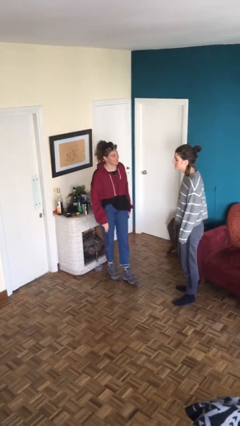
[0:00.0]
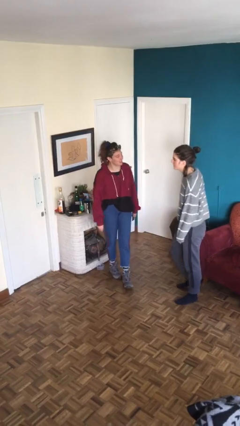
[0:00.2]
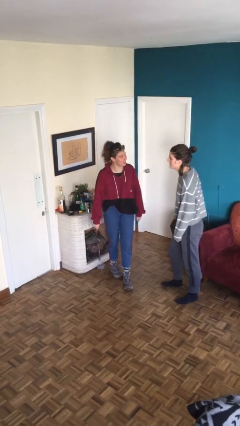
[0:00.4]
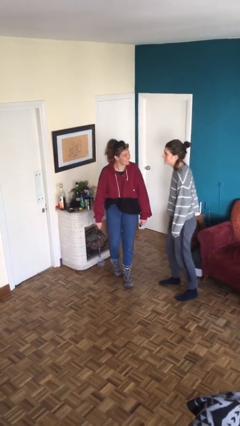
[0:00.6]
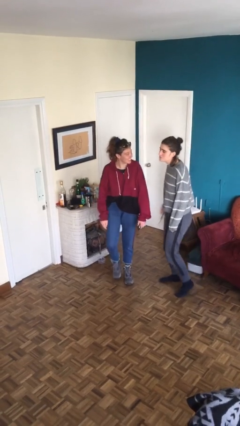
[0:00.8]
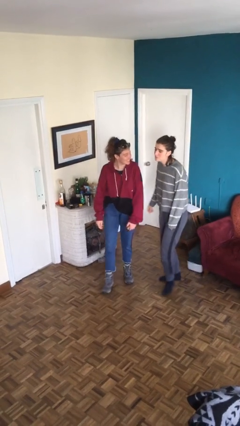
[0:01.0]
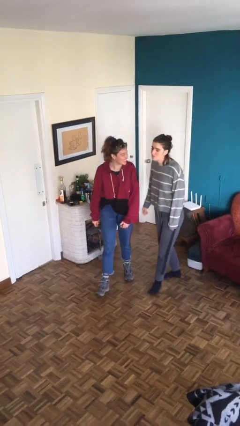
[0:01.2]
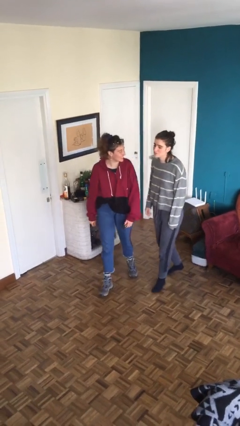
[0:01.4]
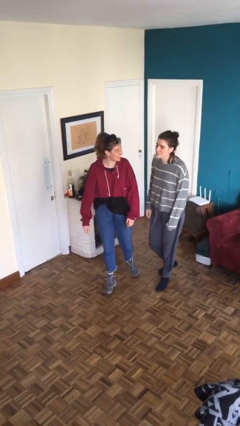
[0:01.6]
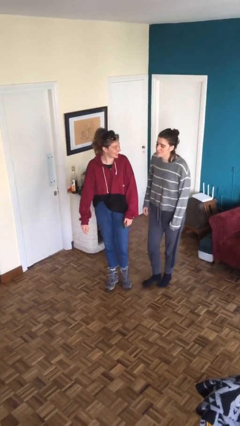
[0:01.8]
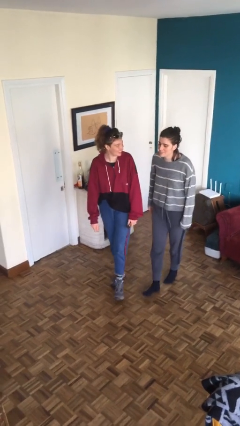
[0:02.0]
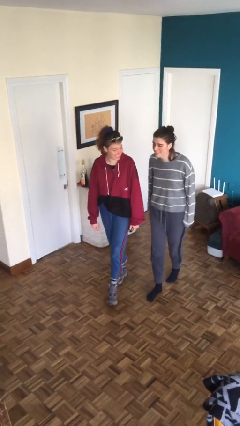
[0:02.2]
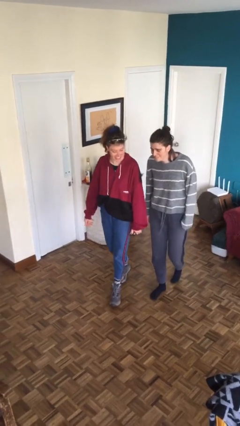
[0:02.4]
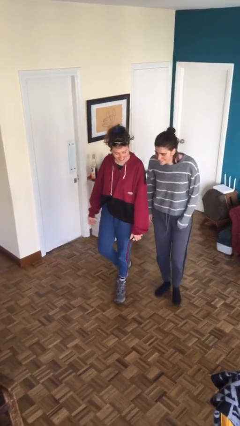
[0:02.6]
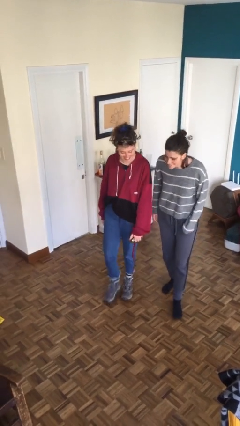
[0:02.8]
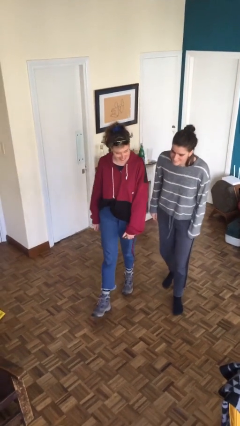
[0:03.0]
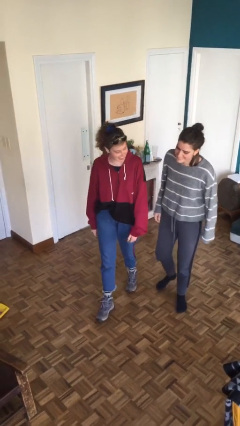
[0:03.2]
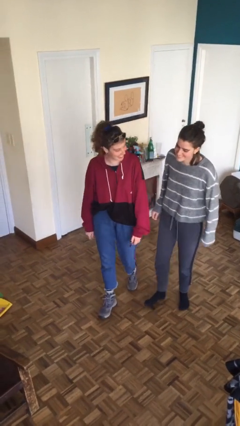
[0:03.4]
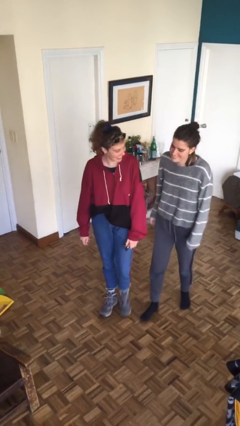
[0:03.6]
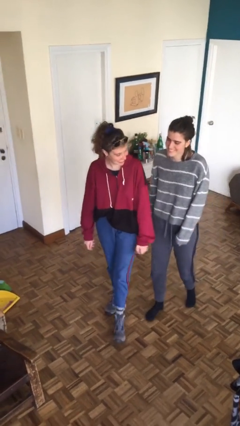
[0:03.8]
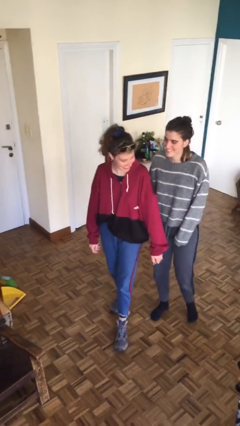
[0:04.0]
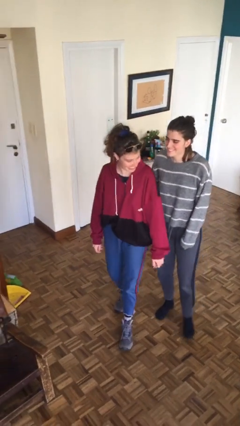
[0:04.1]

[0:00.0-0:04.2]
person talks to person

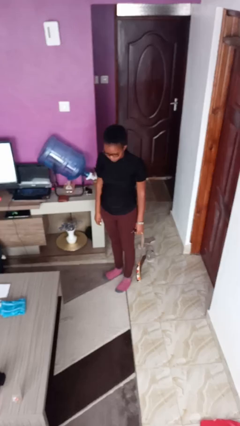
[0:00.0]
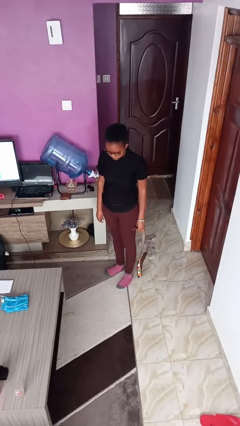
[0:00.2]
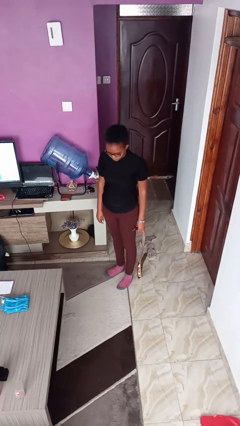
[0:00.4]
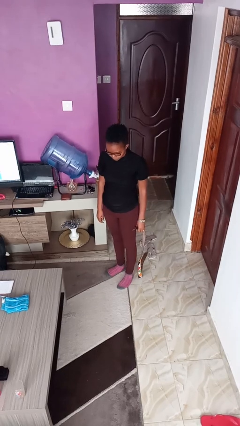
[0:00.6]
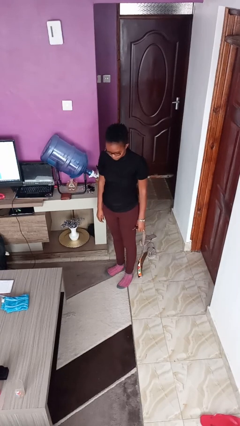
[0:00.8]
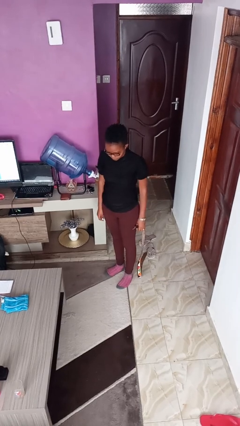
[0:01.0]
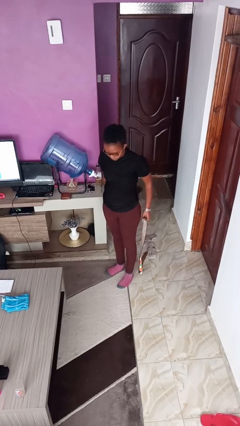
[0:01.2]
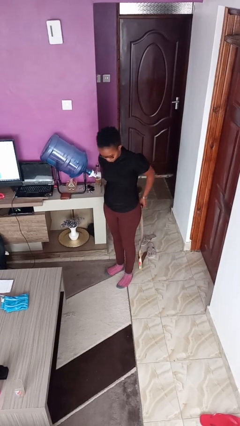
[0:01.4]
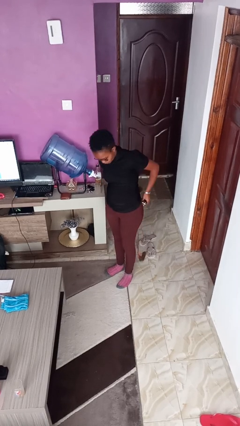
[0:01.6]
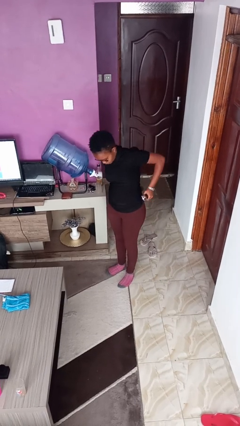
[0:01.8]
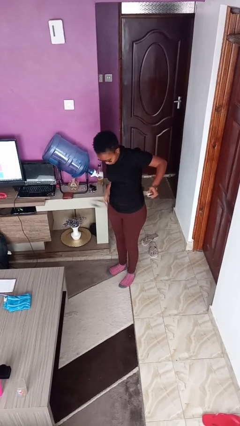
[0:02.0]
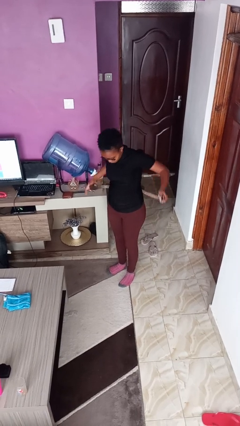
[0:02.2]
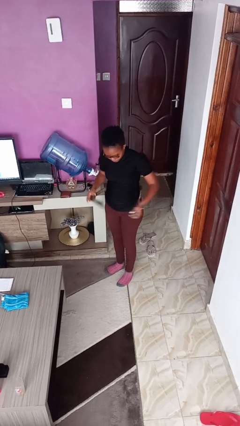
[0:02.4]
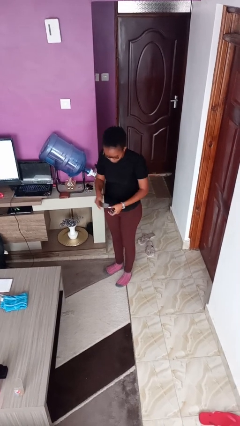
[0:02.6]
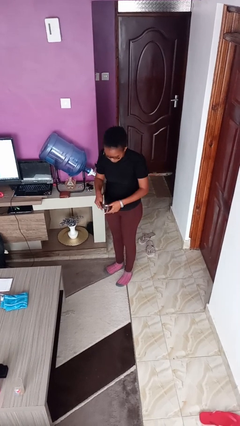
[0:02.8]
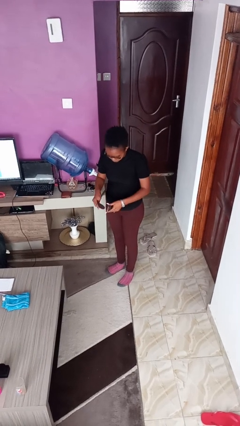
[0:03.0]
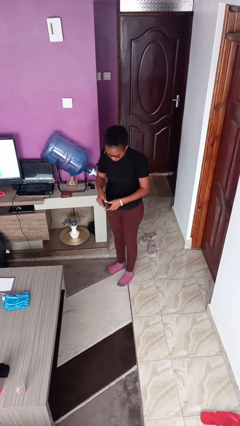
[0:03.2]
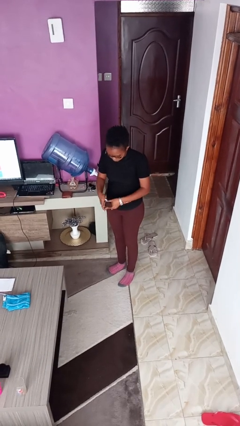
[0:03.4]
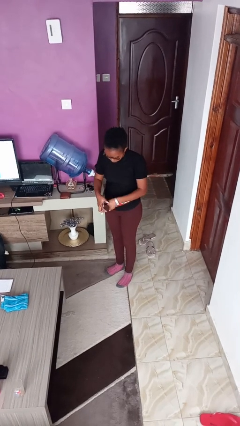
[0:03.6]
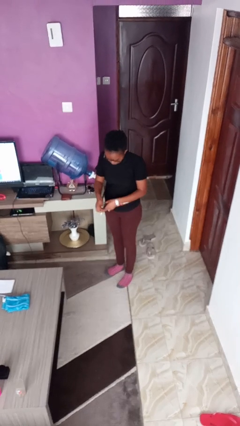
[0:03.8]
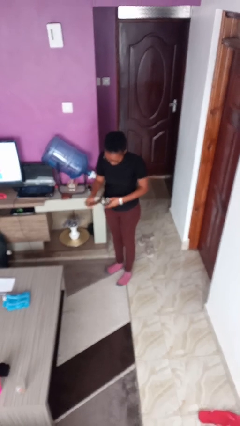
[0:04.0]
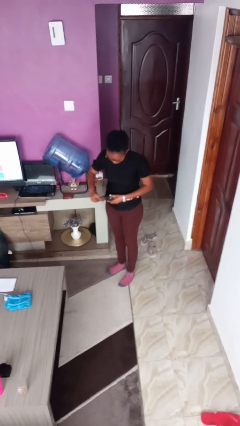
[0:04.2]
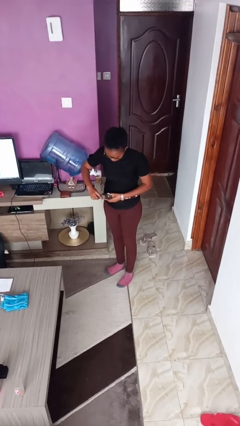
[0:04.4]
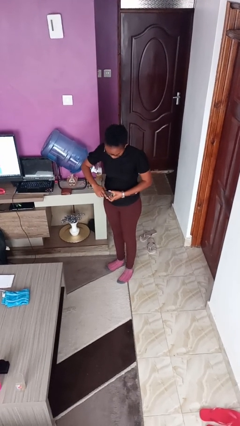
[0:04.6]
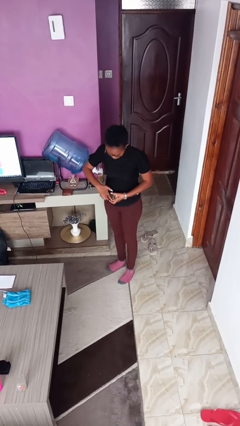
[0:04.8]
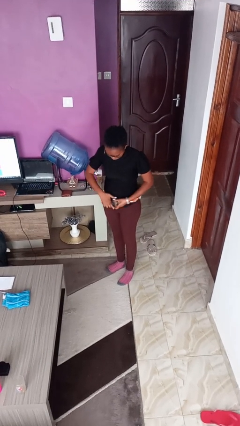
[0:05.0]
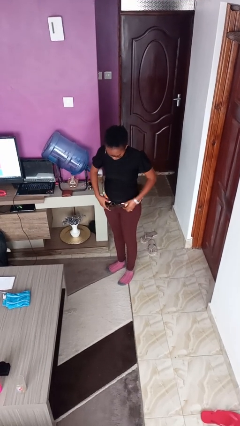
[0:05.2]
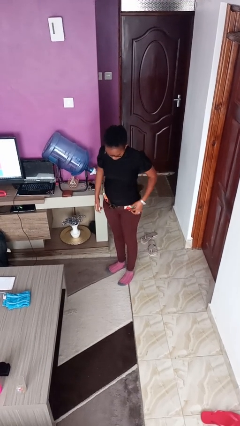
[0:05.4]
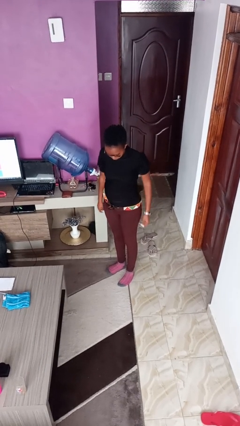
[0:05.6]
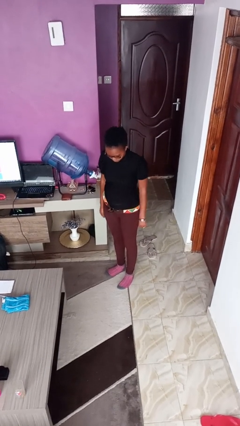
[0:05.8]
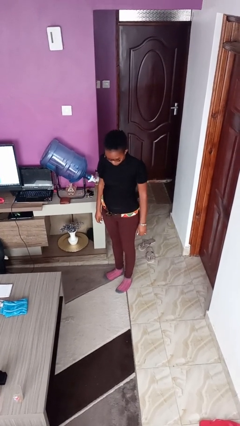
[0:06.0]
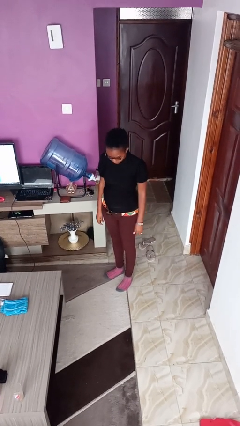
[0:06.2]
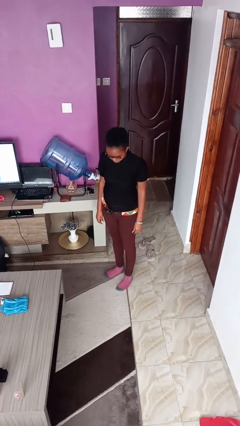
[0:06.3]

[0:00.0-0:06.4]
person puts on belt

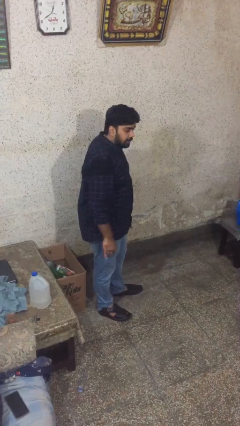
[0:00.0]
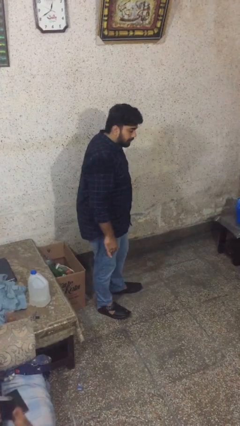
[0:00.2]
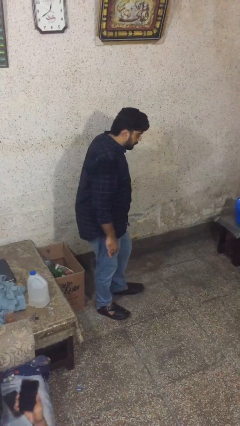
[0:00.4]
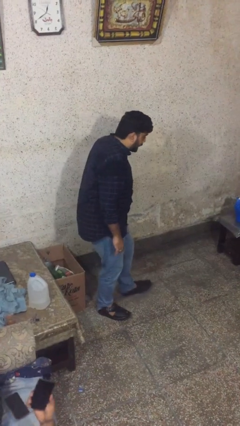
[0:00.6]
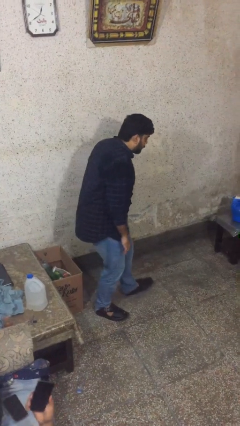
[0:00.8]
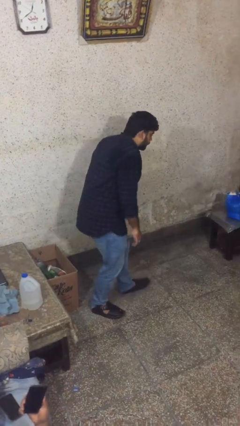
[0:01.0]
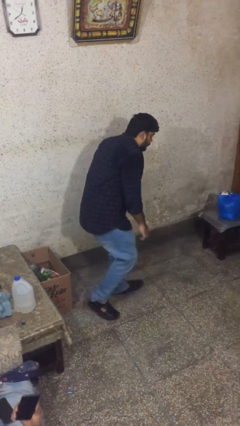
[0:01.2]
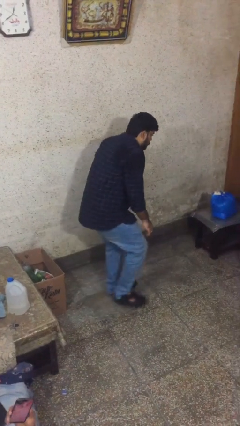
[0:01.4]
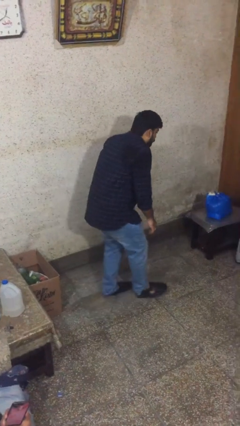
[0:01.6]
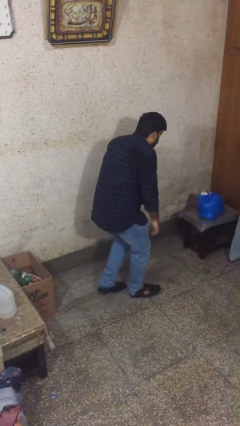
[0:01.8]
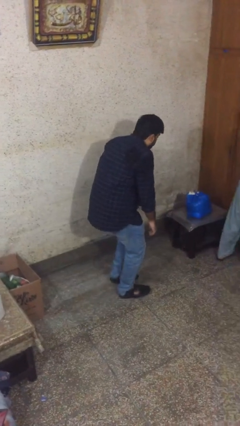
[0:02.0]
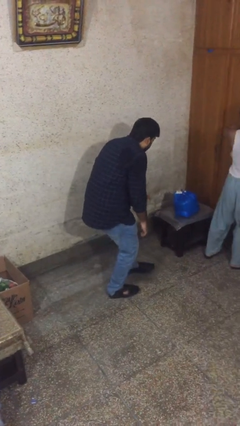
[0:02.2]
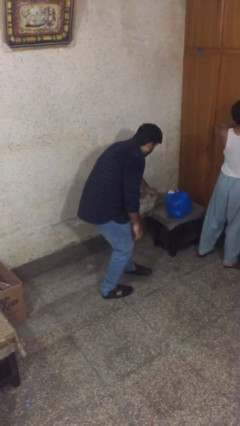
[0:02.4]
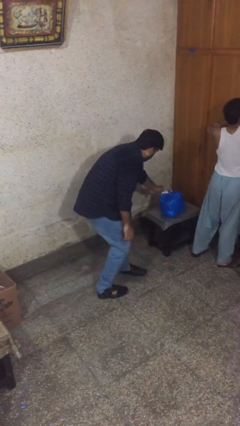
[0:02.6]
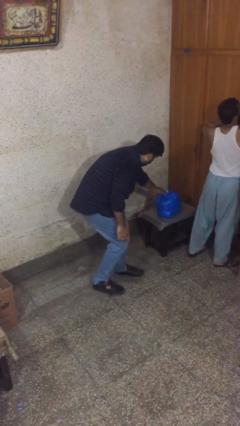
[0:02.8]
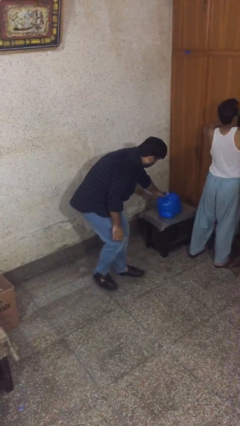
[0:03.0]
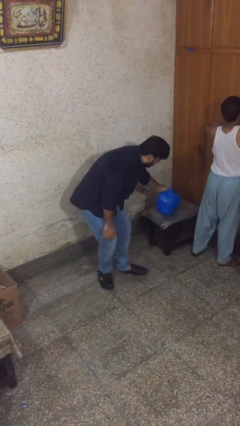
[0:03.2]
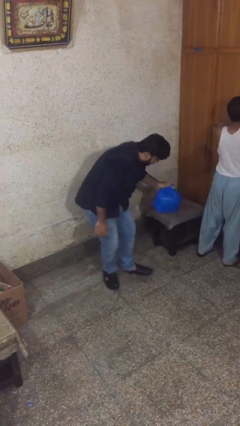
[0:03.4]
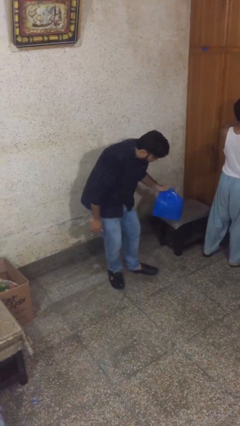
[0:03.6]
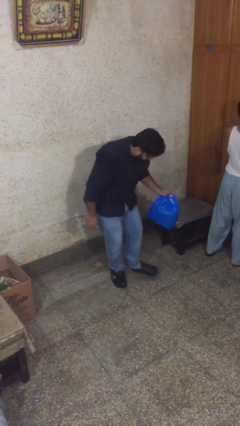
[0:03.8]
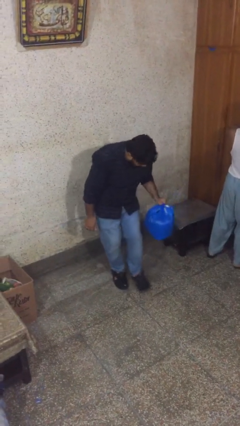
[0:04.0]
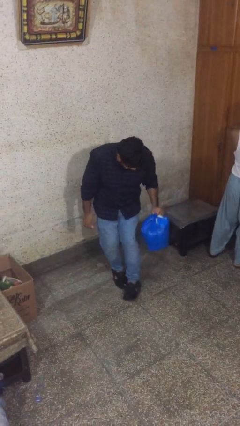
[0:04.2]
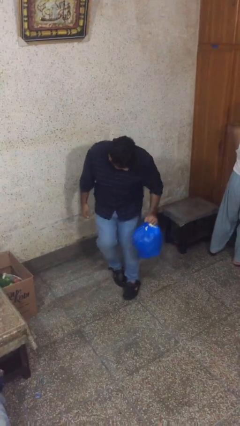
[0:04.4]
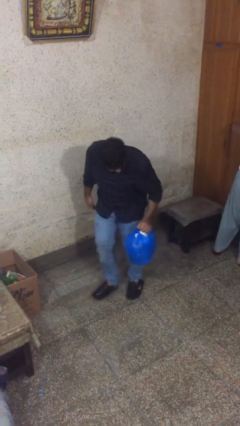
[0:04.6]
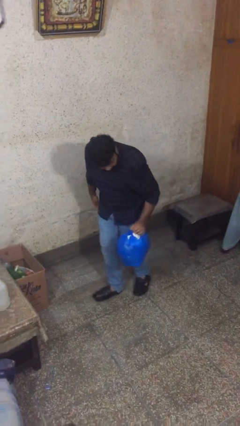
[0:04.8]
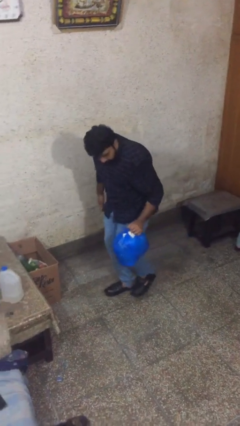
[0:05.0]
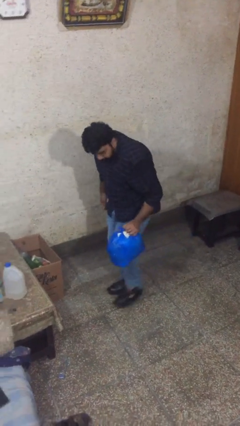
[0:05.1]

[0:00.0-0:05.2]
person steals object from person

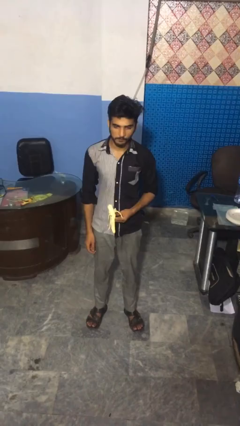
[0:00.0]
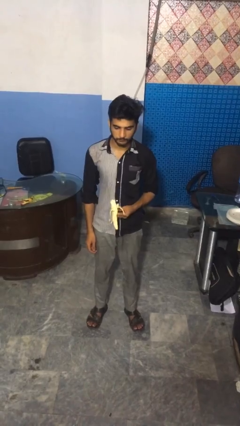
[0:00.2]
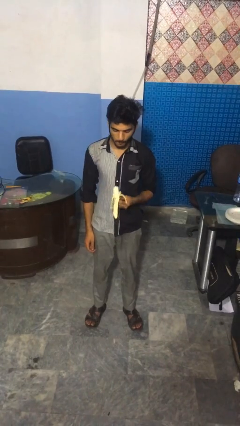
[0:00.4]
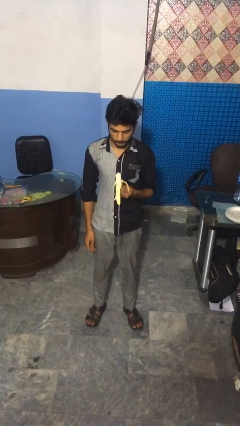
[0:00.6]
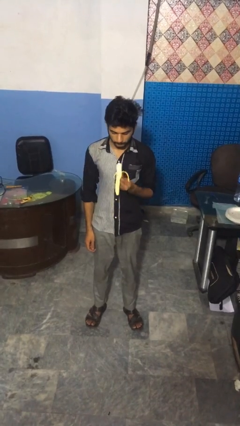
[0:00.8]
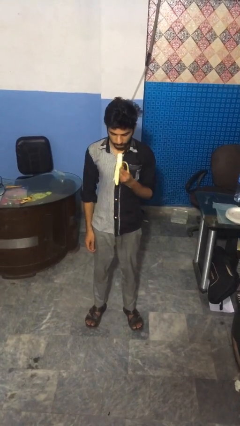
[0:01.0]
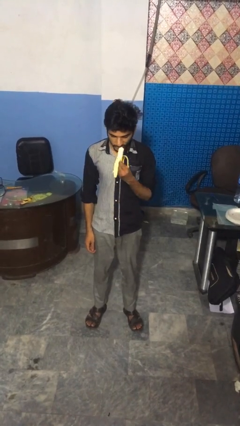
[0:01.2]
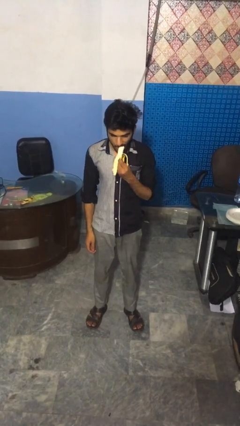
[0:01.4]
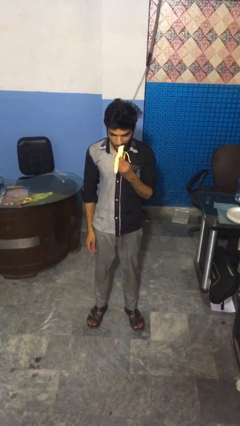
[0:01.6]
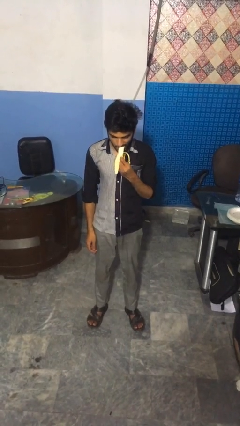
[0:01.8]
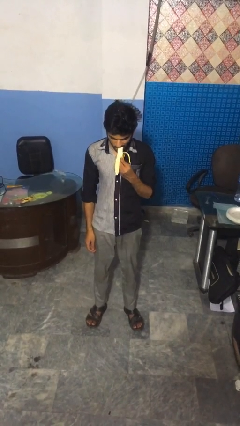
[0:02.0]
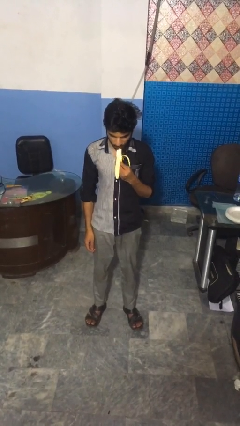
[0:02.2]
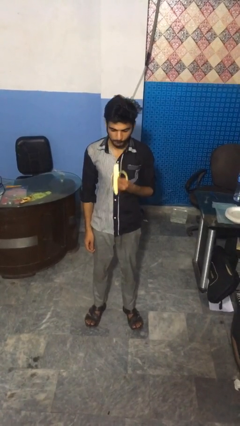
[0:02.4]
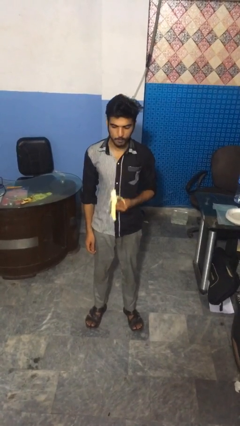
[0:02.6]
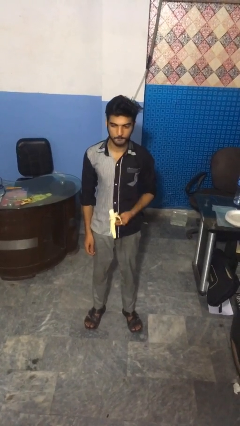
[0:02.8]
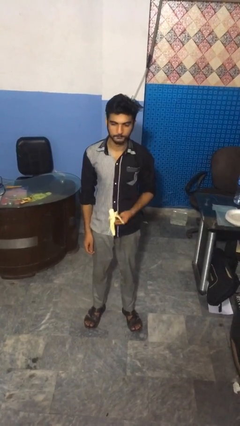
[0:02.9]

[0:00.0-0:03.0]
person eats banana
